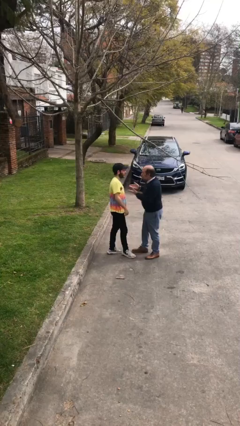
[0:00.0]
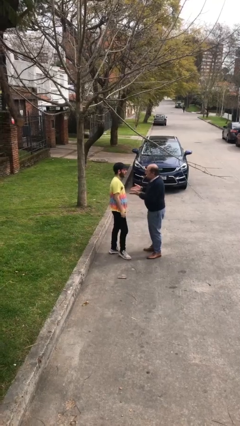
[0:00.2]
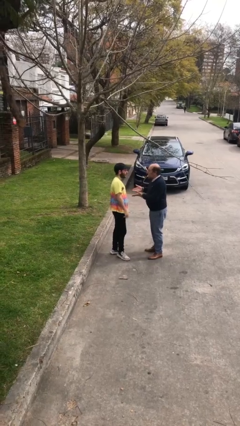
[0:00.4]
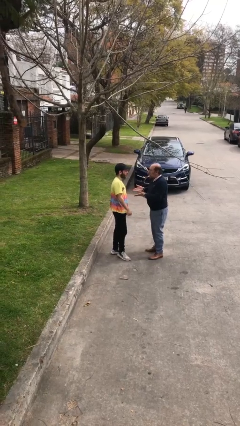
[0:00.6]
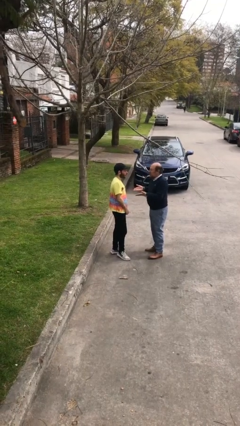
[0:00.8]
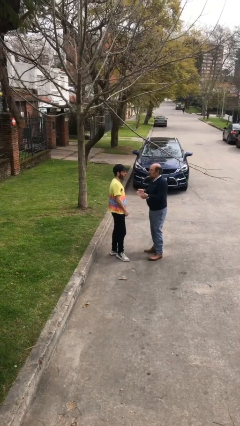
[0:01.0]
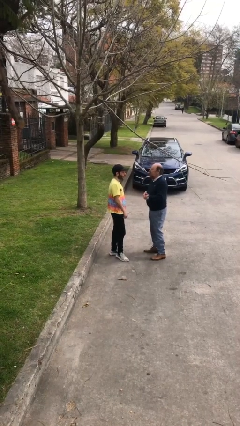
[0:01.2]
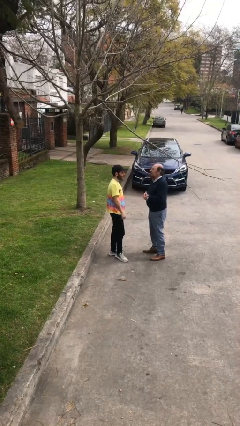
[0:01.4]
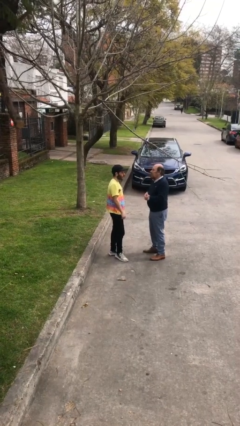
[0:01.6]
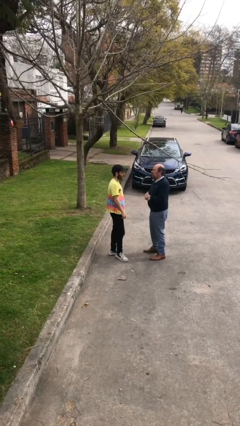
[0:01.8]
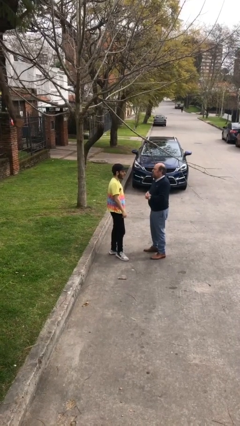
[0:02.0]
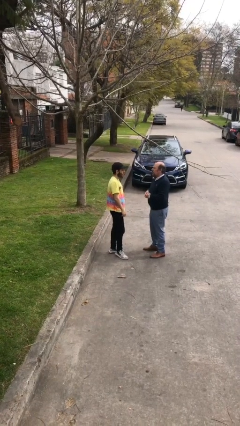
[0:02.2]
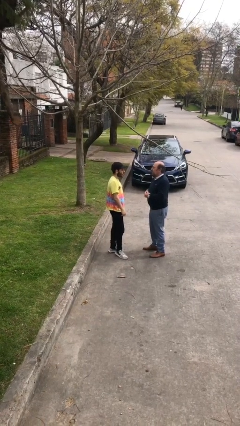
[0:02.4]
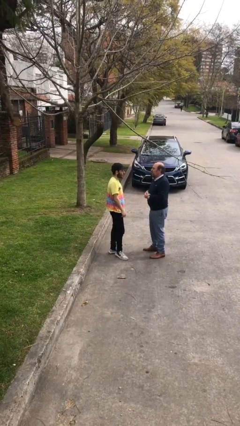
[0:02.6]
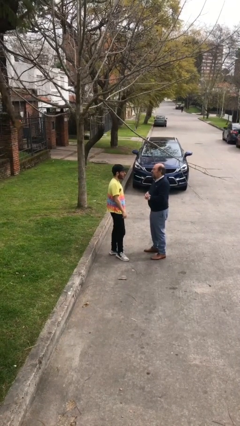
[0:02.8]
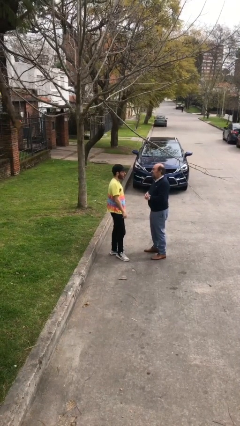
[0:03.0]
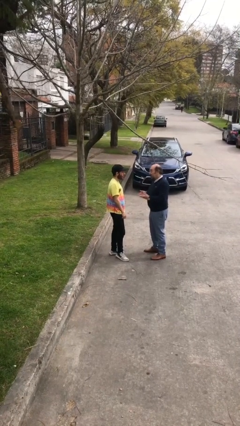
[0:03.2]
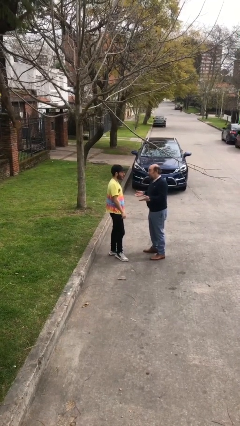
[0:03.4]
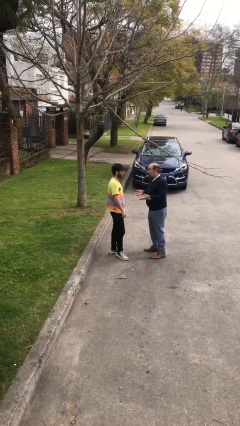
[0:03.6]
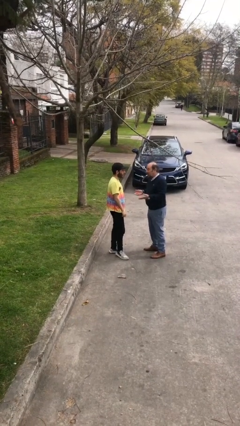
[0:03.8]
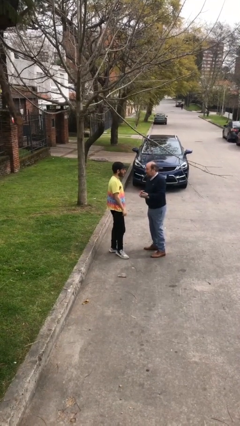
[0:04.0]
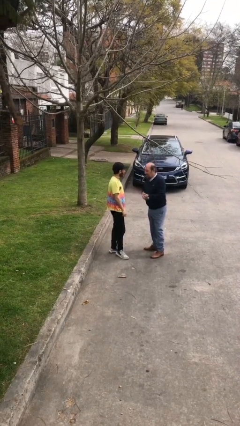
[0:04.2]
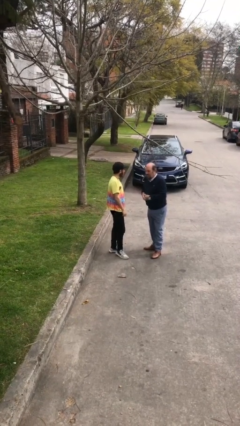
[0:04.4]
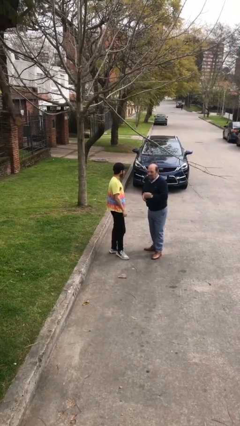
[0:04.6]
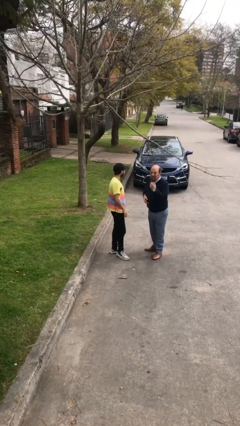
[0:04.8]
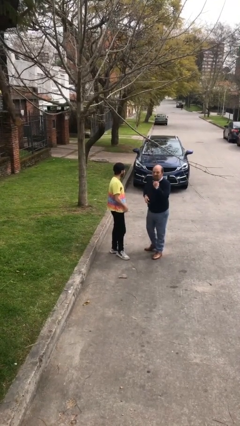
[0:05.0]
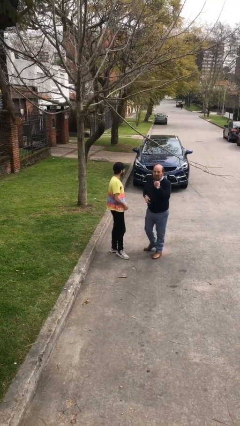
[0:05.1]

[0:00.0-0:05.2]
person talks to person

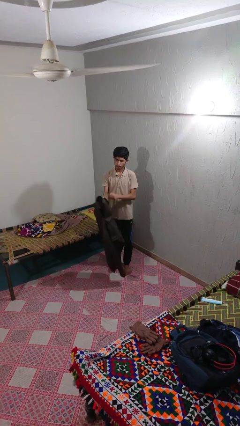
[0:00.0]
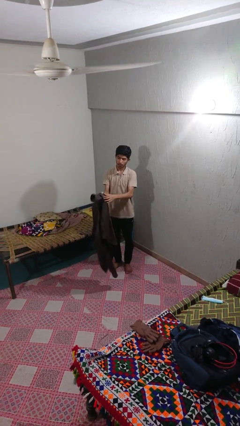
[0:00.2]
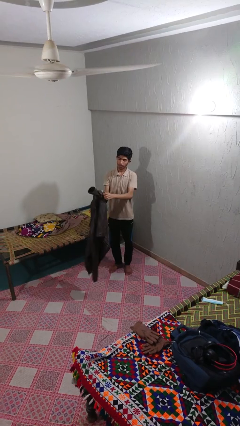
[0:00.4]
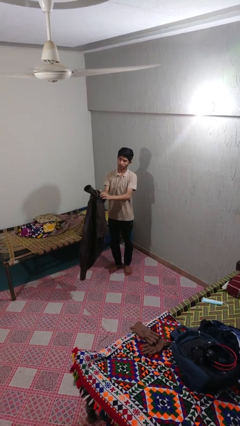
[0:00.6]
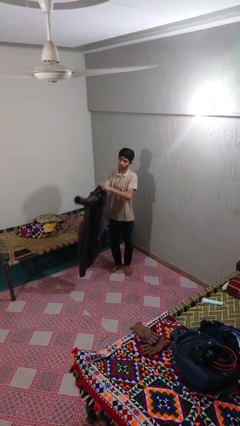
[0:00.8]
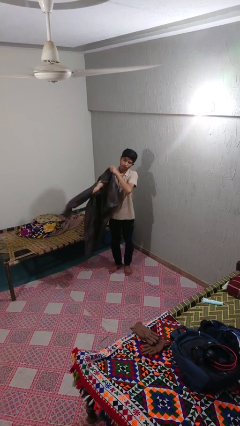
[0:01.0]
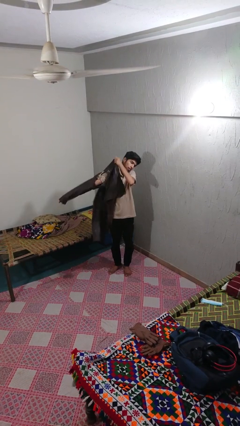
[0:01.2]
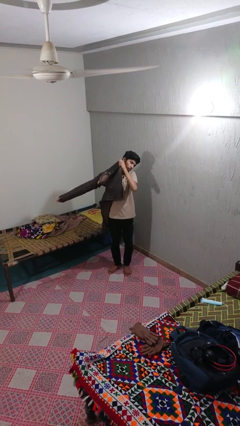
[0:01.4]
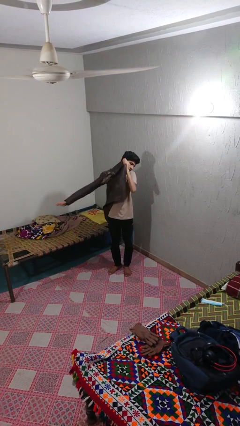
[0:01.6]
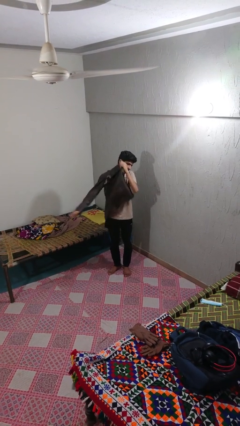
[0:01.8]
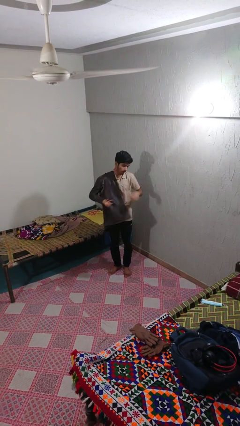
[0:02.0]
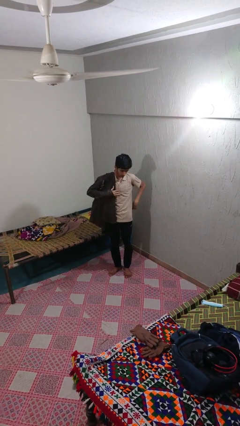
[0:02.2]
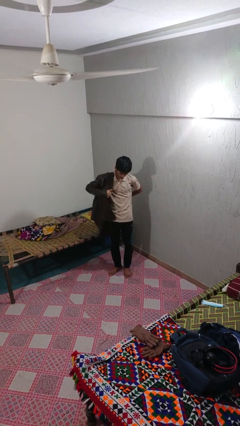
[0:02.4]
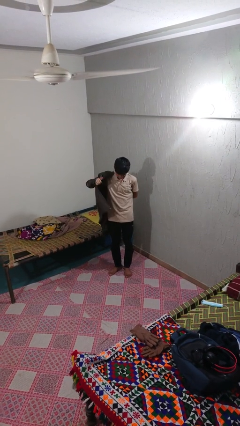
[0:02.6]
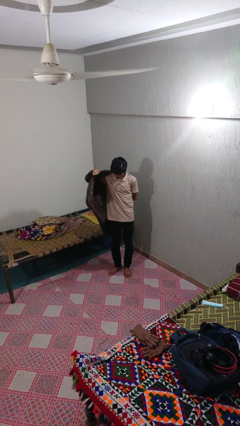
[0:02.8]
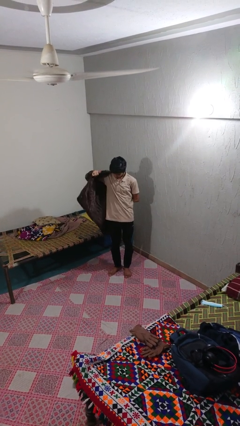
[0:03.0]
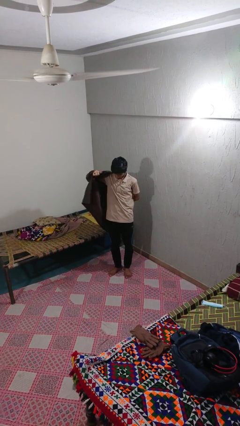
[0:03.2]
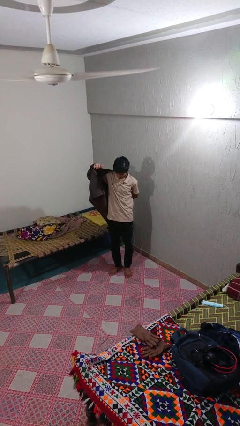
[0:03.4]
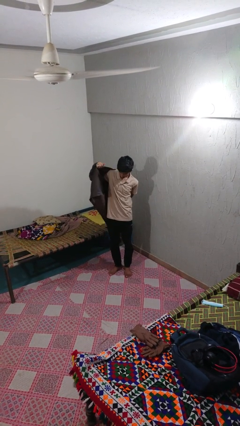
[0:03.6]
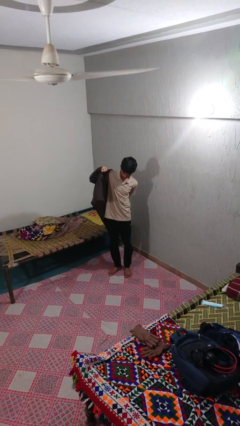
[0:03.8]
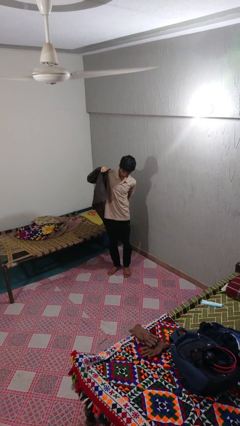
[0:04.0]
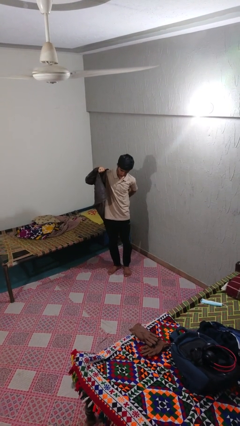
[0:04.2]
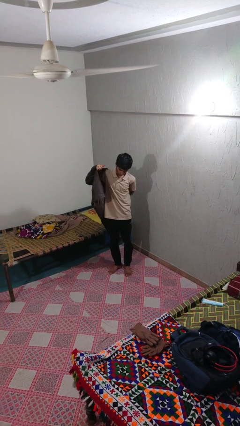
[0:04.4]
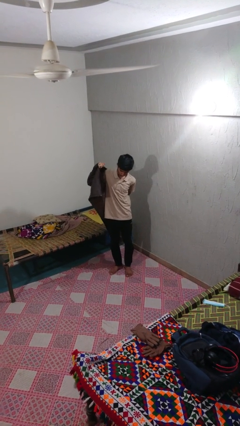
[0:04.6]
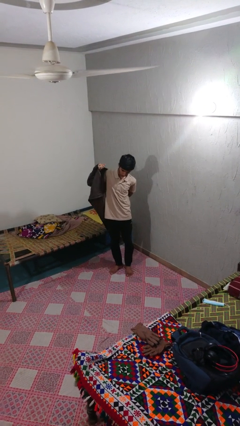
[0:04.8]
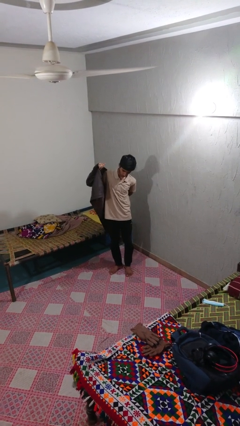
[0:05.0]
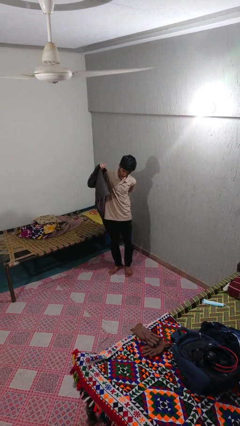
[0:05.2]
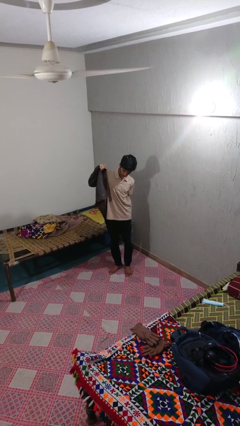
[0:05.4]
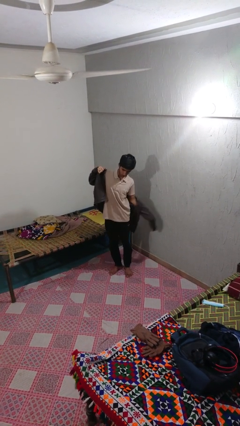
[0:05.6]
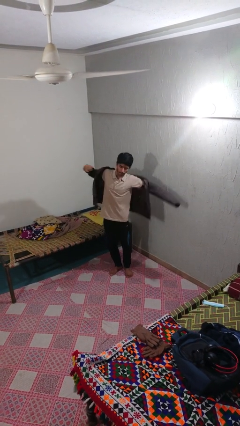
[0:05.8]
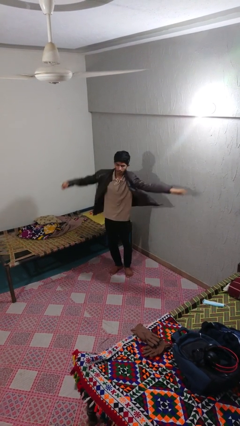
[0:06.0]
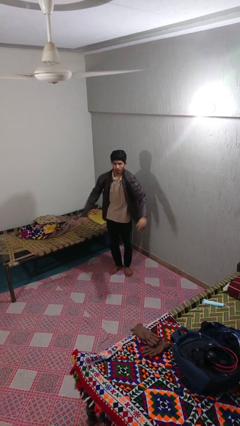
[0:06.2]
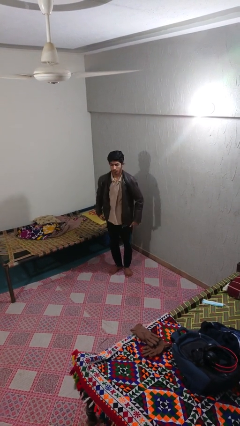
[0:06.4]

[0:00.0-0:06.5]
person puts on jacket

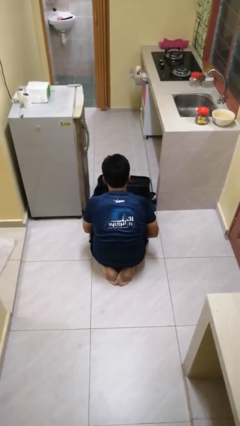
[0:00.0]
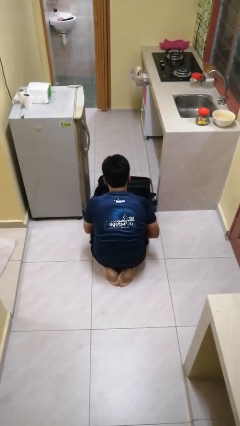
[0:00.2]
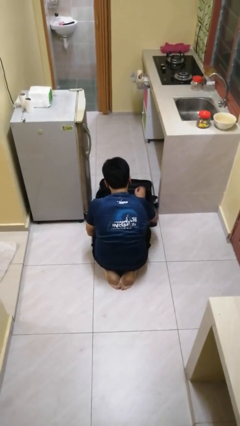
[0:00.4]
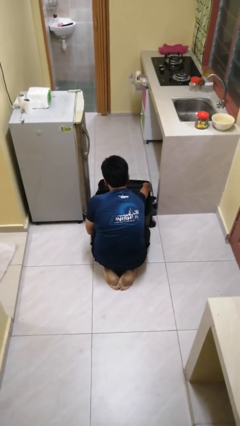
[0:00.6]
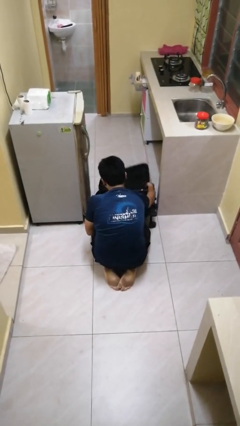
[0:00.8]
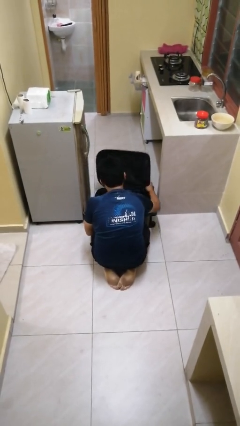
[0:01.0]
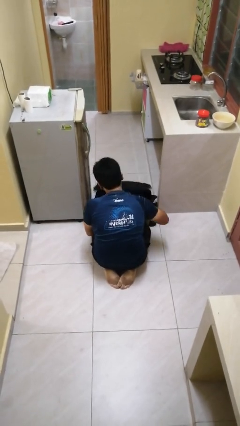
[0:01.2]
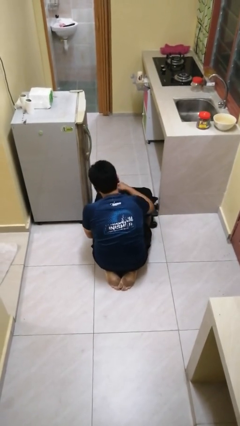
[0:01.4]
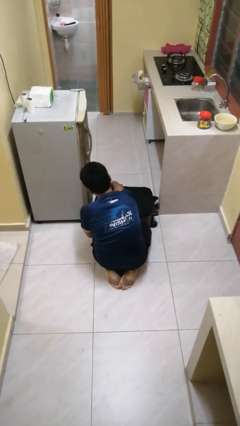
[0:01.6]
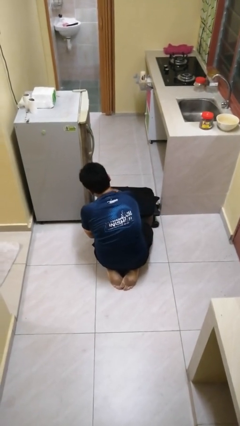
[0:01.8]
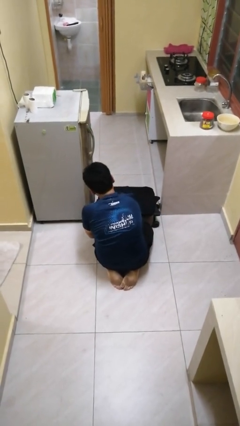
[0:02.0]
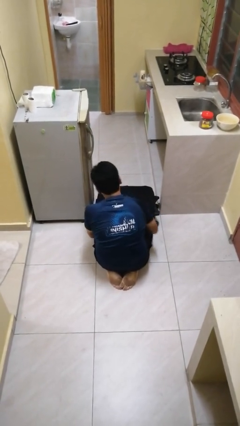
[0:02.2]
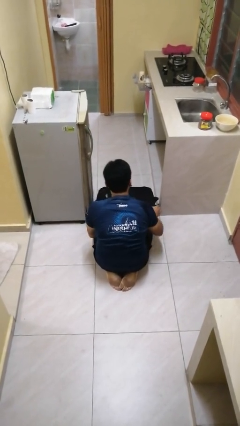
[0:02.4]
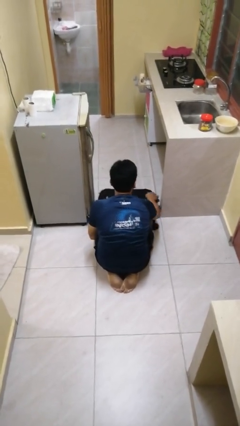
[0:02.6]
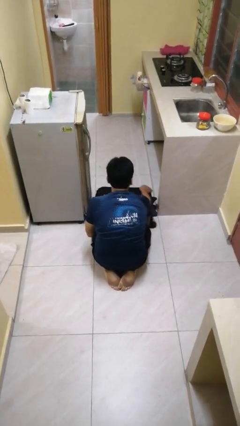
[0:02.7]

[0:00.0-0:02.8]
person closes suitcase

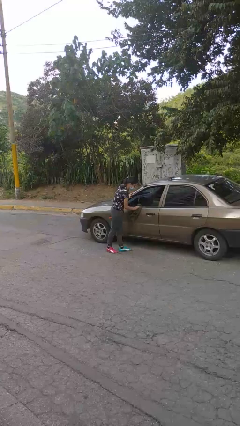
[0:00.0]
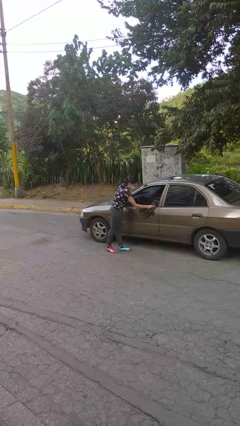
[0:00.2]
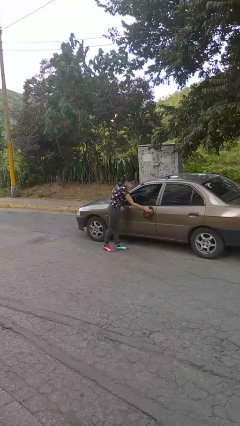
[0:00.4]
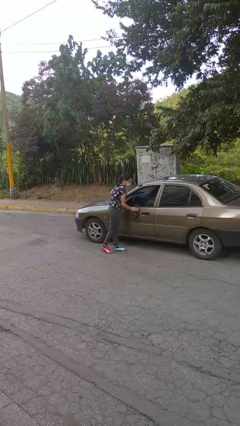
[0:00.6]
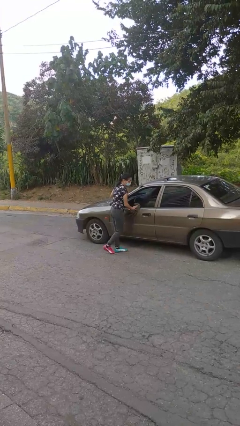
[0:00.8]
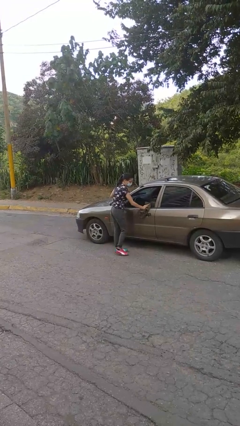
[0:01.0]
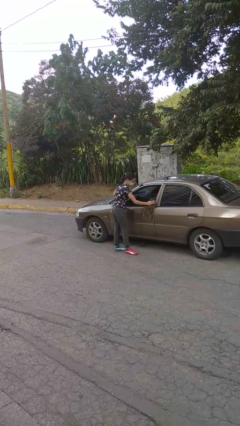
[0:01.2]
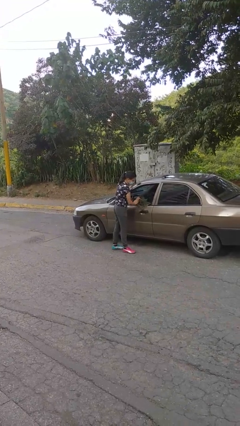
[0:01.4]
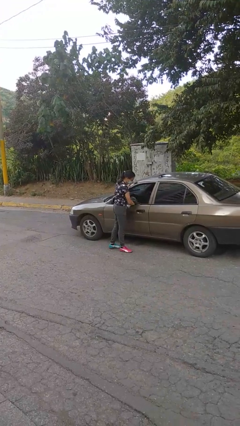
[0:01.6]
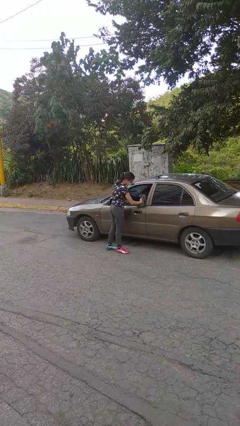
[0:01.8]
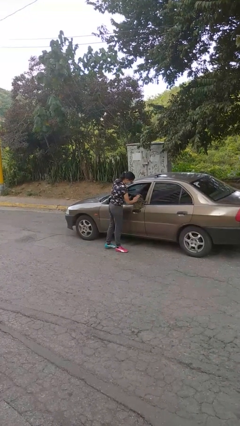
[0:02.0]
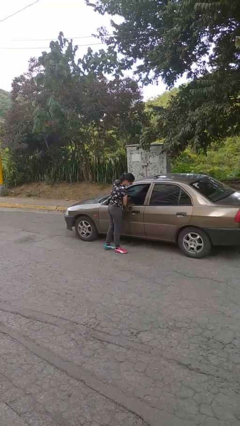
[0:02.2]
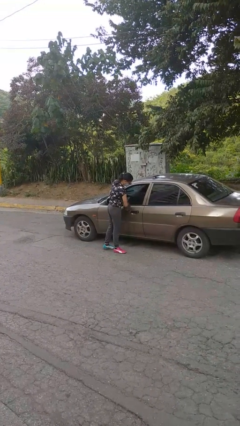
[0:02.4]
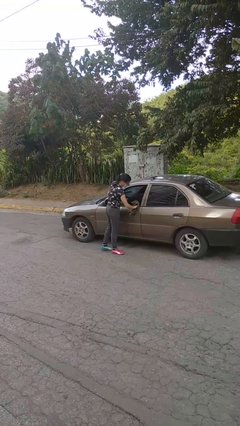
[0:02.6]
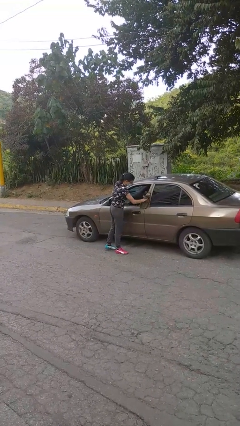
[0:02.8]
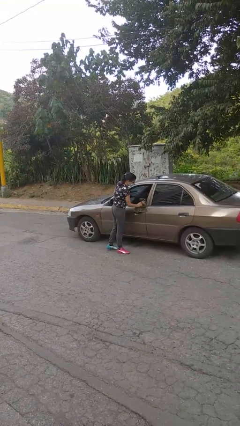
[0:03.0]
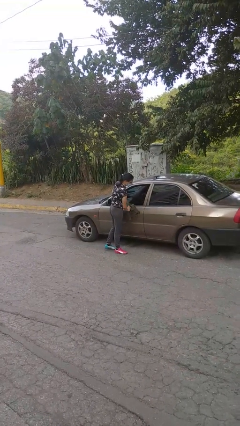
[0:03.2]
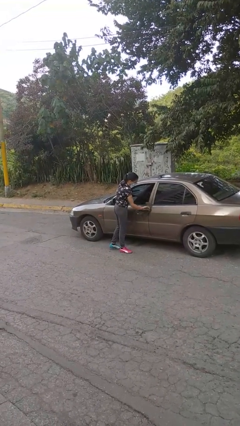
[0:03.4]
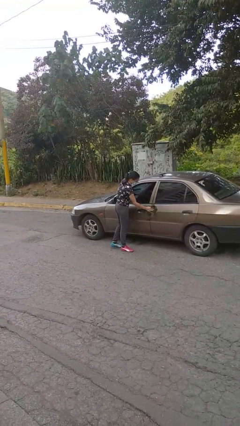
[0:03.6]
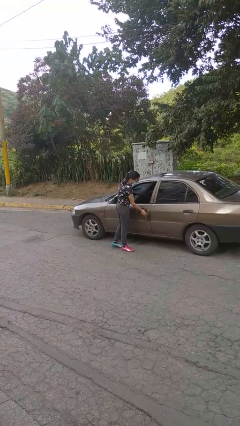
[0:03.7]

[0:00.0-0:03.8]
person polishes car with rag
